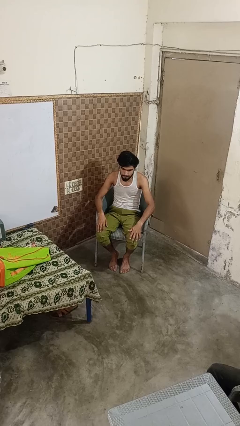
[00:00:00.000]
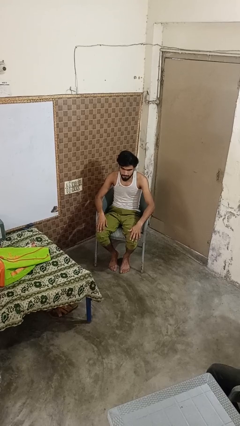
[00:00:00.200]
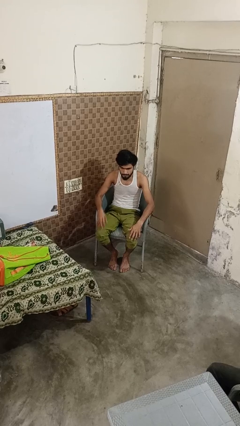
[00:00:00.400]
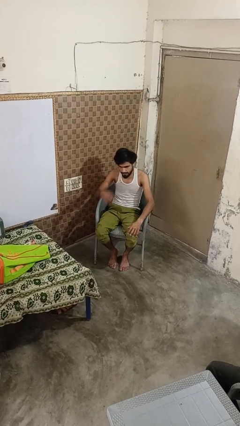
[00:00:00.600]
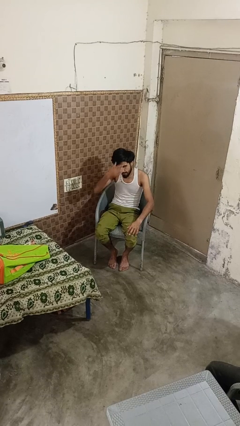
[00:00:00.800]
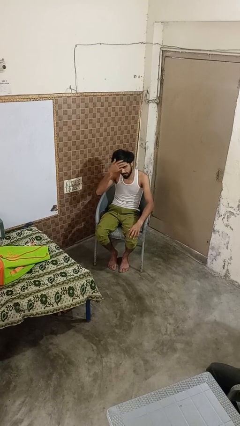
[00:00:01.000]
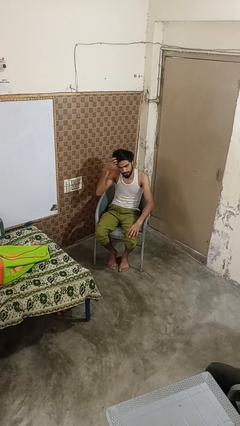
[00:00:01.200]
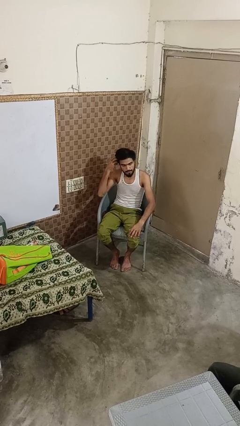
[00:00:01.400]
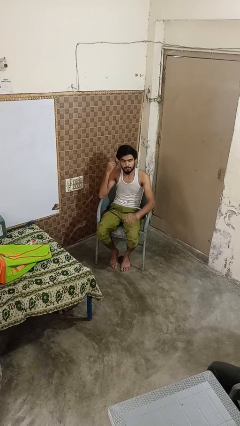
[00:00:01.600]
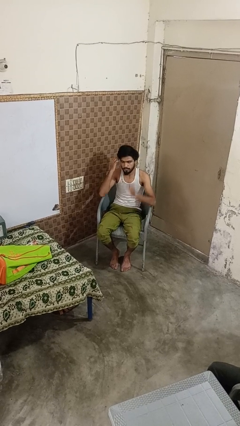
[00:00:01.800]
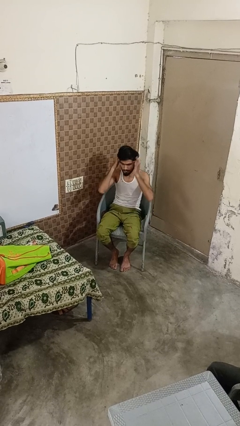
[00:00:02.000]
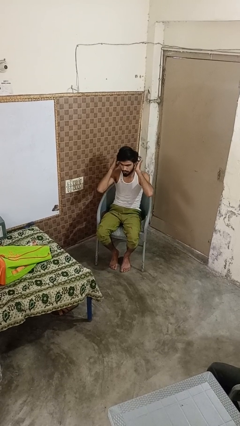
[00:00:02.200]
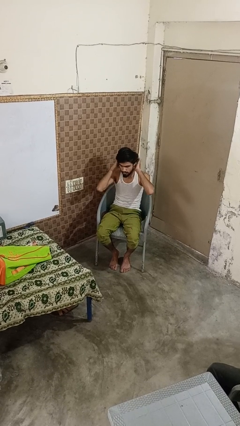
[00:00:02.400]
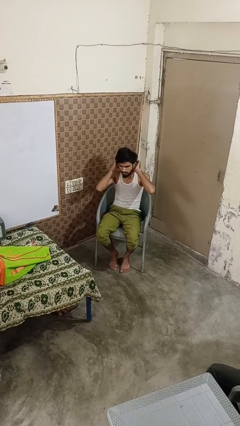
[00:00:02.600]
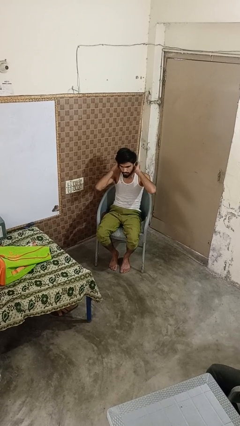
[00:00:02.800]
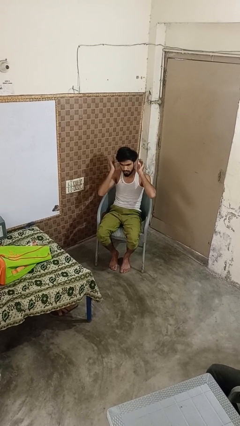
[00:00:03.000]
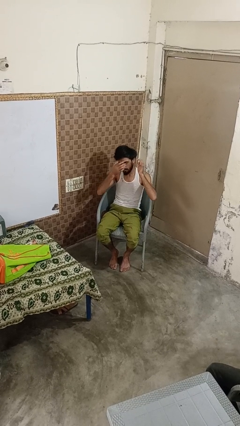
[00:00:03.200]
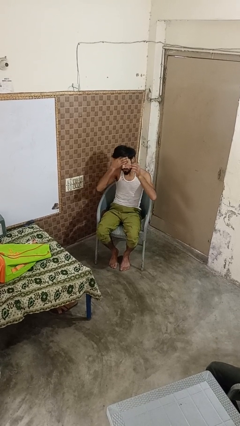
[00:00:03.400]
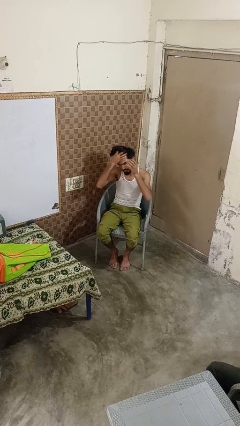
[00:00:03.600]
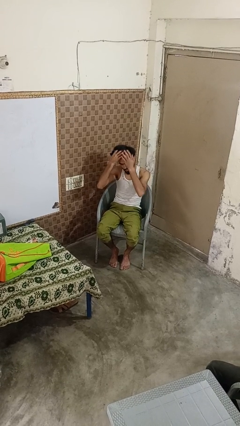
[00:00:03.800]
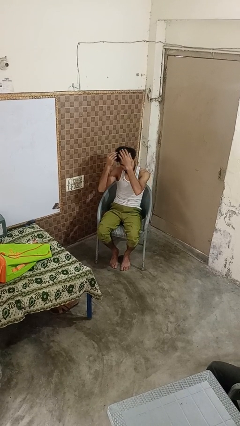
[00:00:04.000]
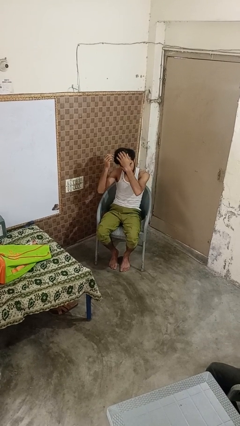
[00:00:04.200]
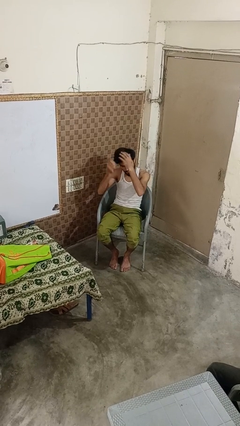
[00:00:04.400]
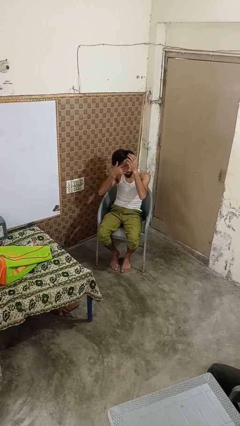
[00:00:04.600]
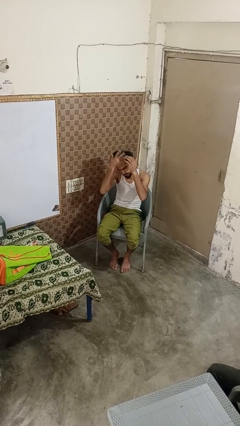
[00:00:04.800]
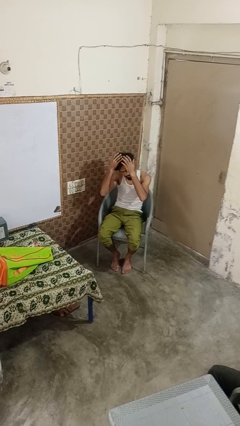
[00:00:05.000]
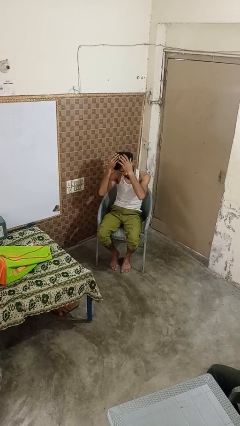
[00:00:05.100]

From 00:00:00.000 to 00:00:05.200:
person strokes hair

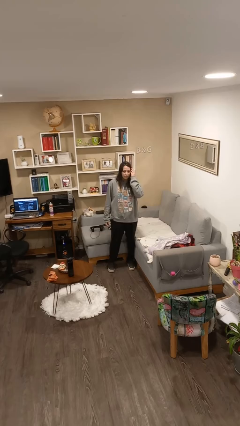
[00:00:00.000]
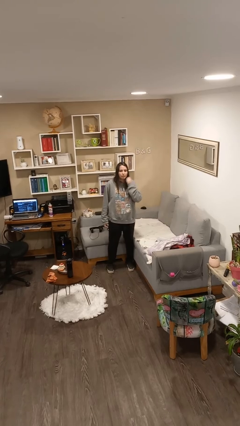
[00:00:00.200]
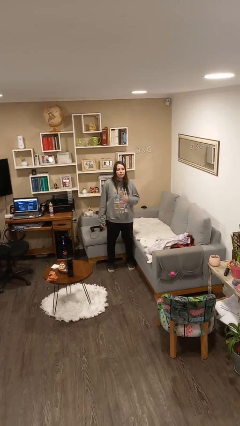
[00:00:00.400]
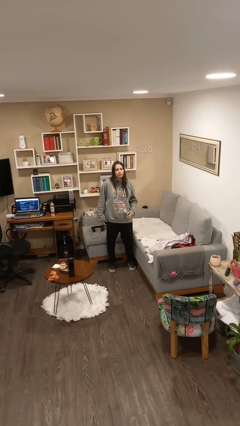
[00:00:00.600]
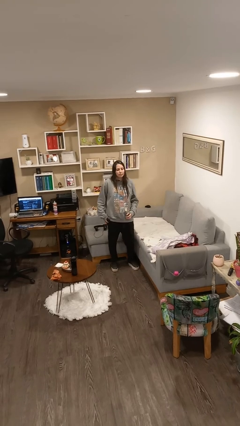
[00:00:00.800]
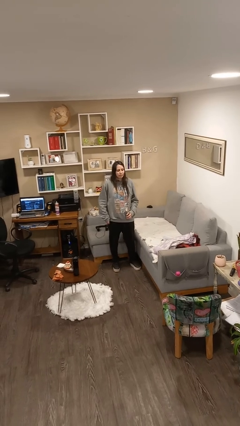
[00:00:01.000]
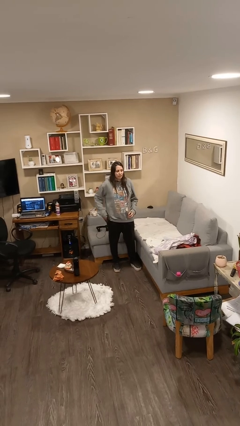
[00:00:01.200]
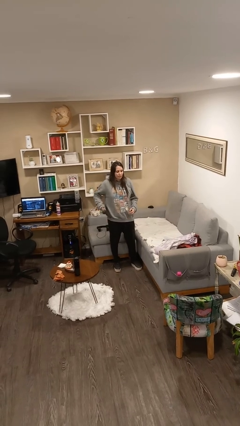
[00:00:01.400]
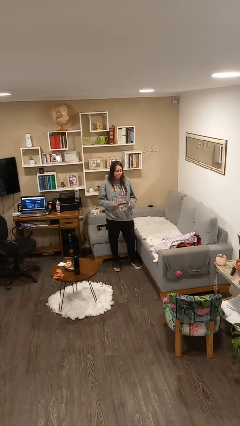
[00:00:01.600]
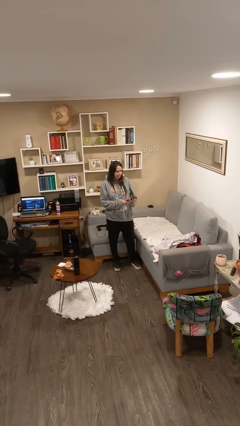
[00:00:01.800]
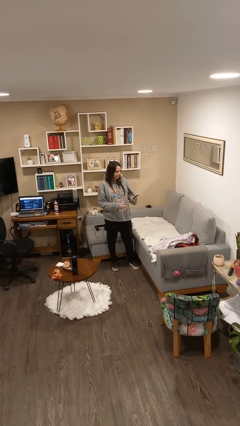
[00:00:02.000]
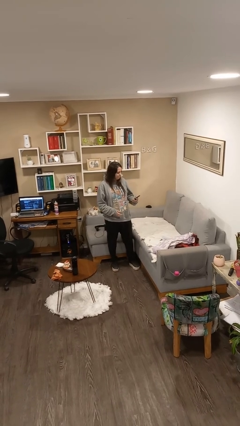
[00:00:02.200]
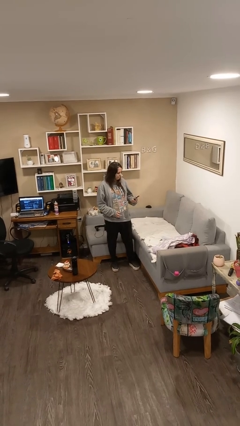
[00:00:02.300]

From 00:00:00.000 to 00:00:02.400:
person takes phone from pocket

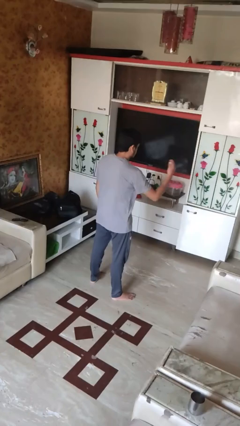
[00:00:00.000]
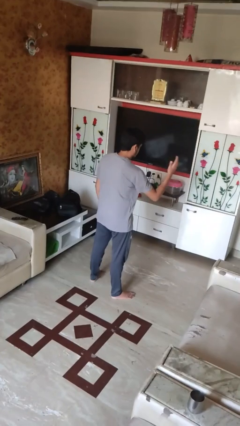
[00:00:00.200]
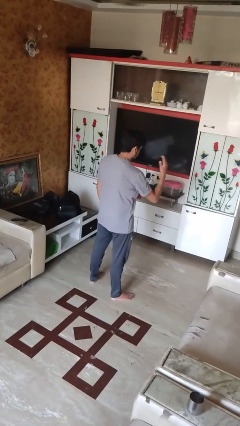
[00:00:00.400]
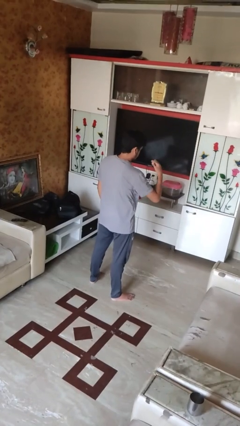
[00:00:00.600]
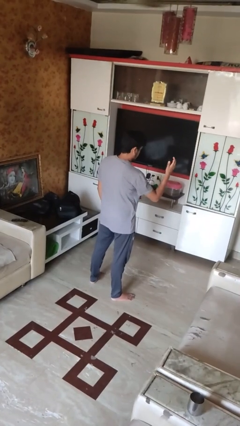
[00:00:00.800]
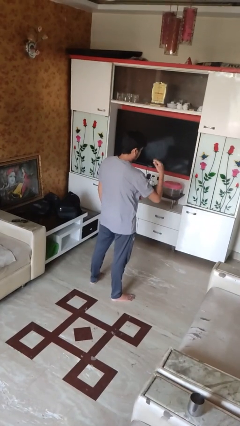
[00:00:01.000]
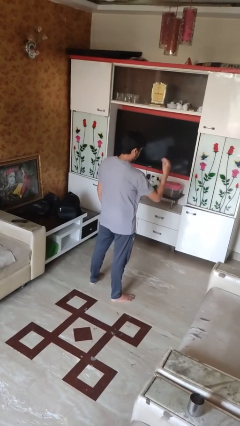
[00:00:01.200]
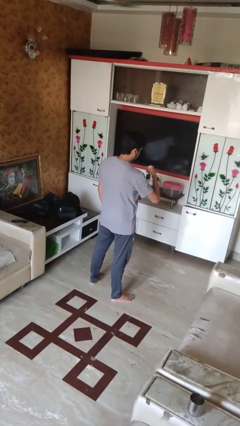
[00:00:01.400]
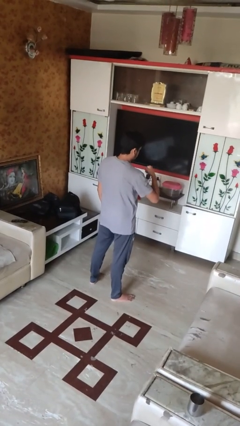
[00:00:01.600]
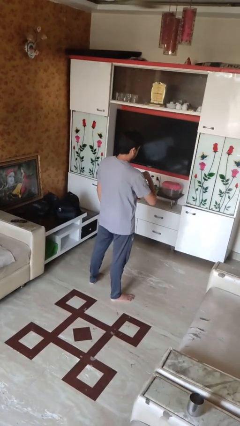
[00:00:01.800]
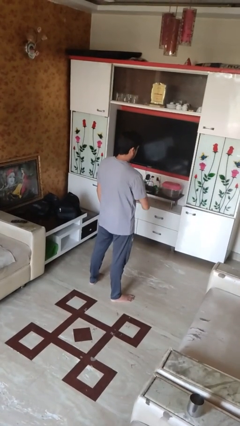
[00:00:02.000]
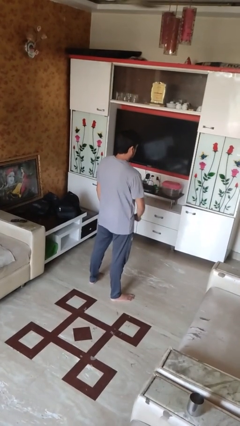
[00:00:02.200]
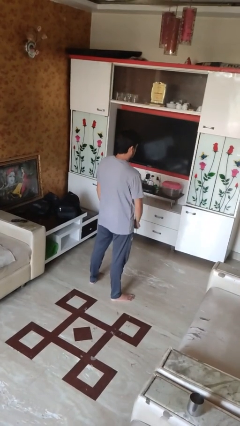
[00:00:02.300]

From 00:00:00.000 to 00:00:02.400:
person gestures come here

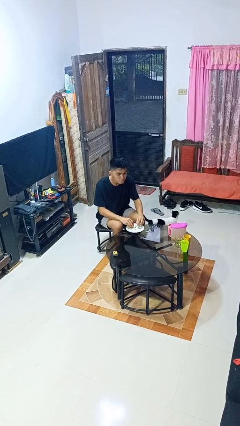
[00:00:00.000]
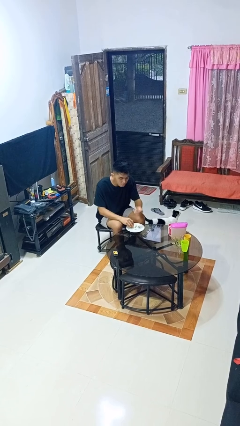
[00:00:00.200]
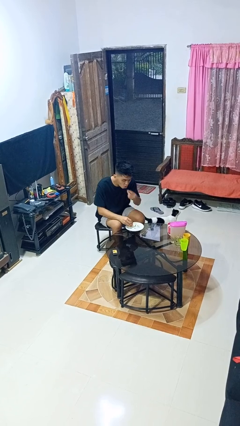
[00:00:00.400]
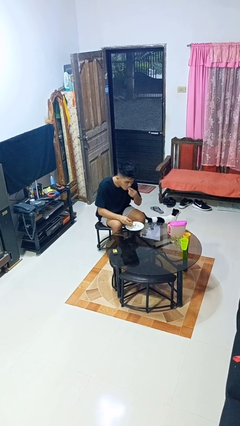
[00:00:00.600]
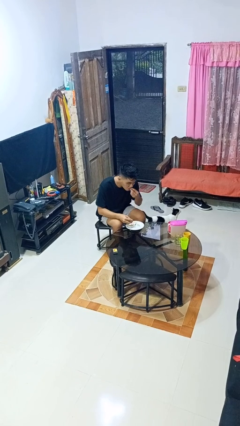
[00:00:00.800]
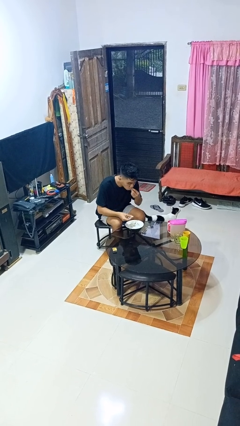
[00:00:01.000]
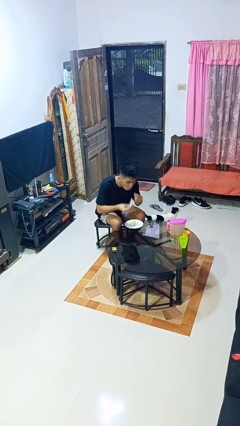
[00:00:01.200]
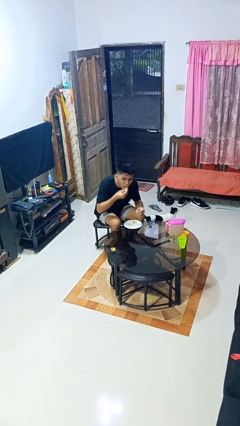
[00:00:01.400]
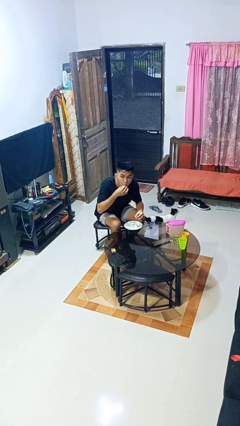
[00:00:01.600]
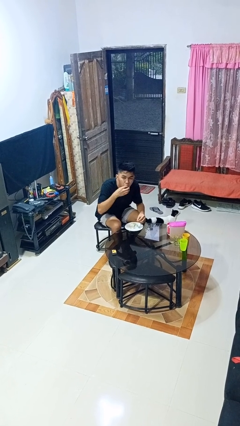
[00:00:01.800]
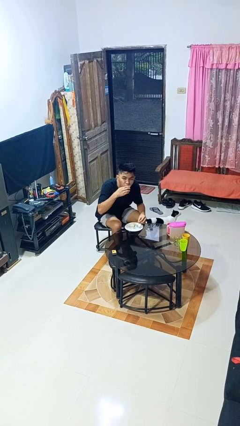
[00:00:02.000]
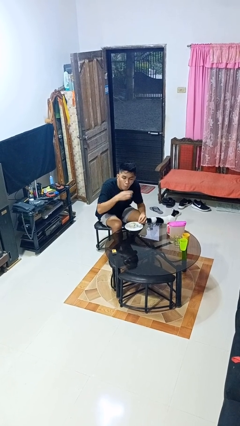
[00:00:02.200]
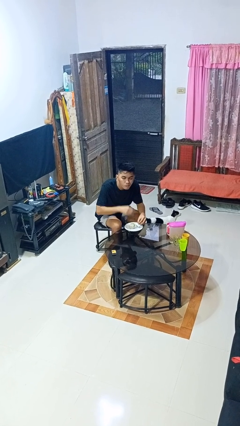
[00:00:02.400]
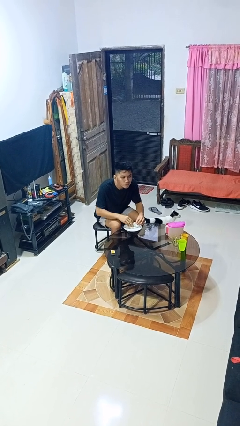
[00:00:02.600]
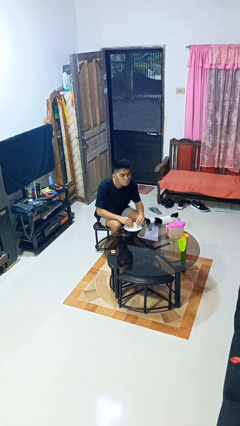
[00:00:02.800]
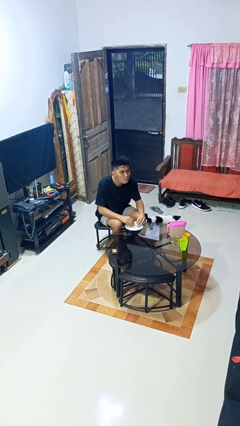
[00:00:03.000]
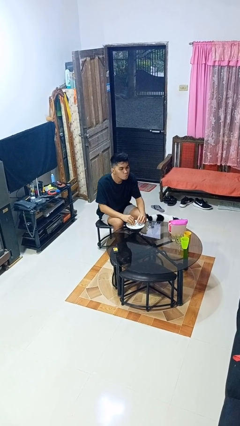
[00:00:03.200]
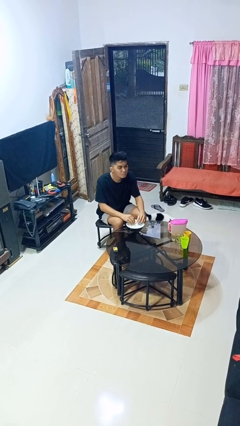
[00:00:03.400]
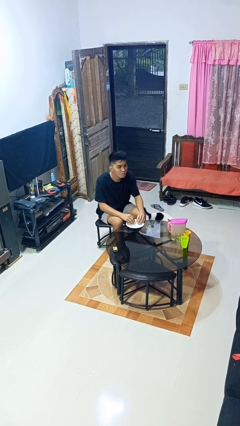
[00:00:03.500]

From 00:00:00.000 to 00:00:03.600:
person eats with hands

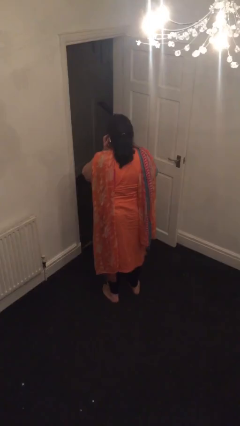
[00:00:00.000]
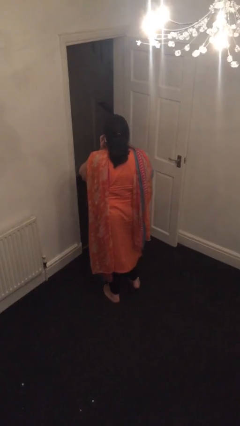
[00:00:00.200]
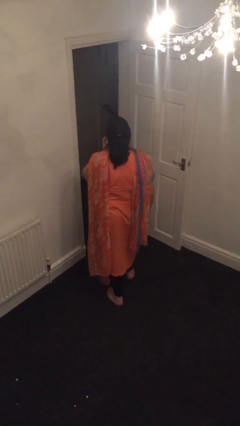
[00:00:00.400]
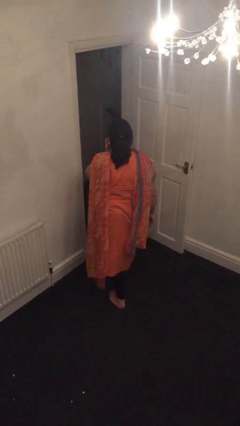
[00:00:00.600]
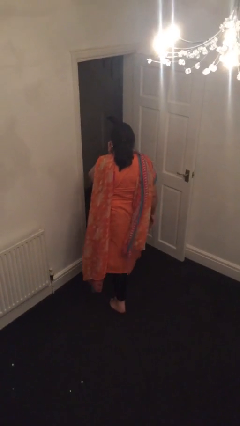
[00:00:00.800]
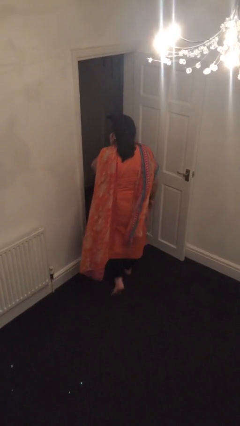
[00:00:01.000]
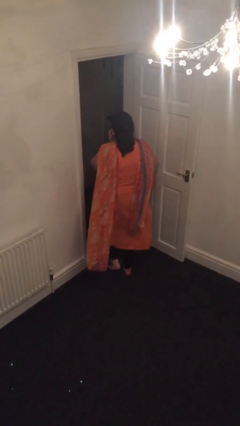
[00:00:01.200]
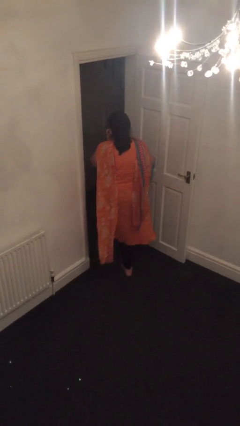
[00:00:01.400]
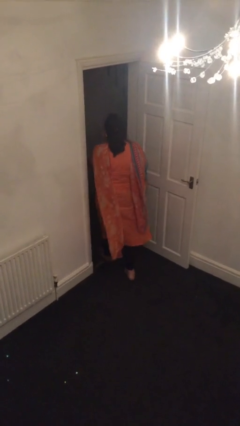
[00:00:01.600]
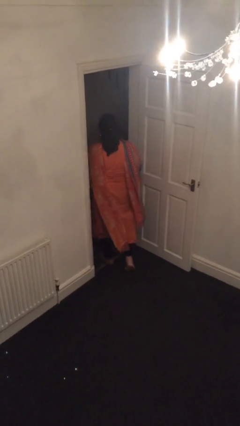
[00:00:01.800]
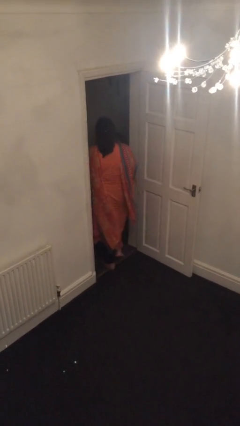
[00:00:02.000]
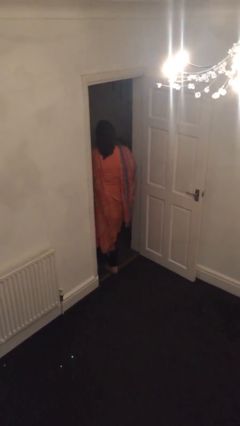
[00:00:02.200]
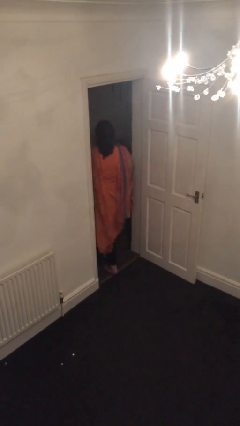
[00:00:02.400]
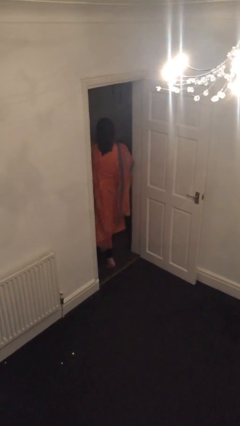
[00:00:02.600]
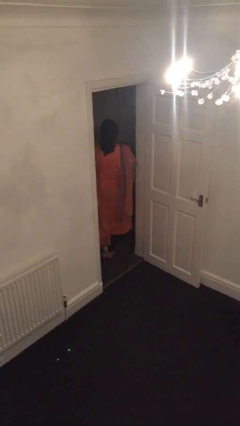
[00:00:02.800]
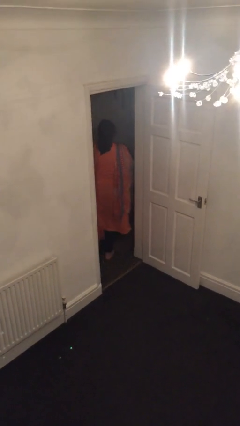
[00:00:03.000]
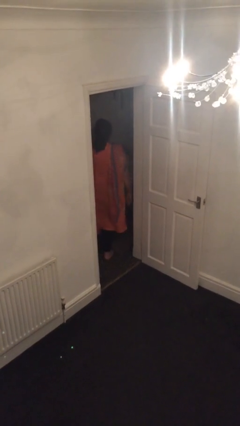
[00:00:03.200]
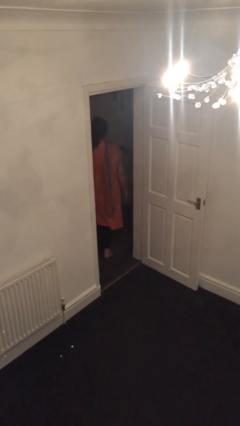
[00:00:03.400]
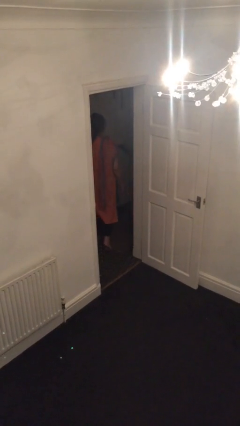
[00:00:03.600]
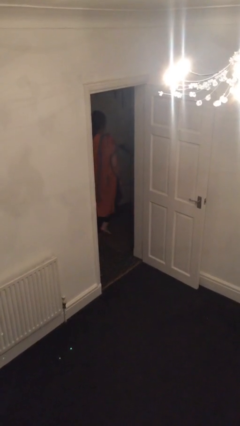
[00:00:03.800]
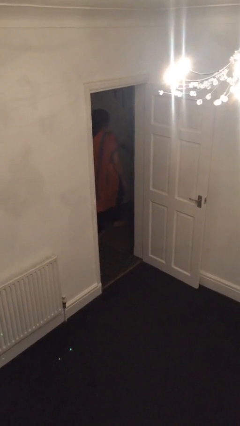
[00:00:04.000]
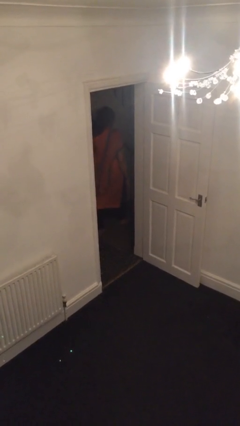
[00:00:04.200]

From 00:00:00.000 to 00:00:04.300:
person exits scene through structure
